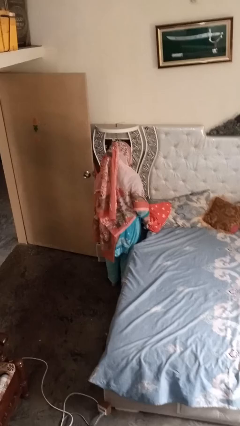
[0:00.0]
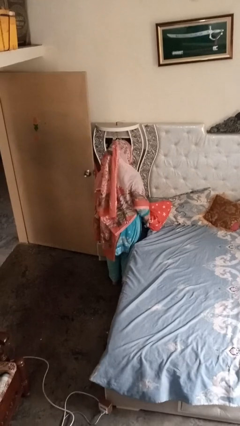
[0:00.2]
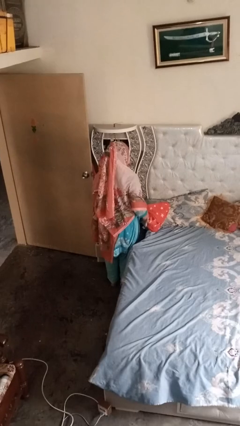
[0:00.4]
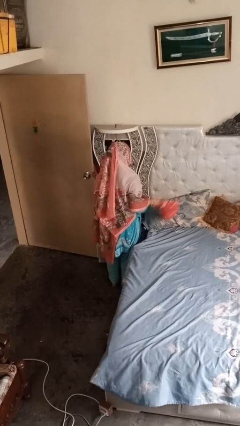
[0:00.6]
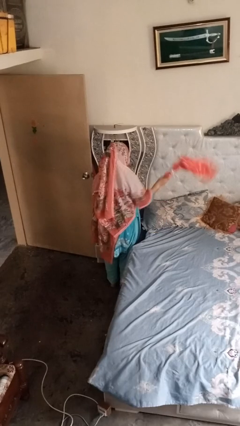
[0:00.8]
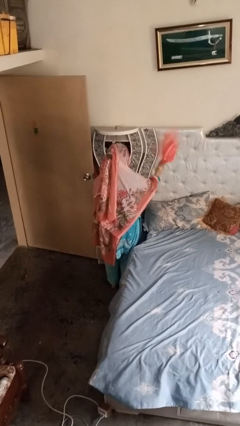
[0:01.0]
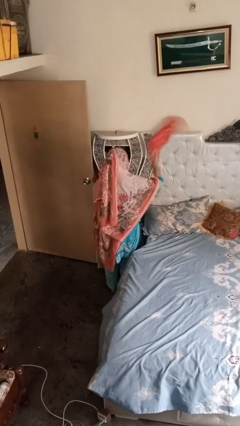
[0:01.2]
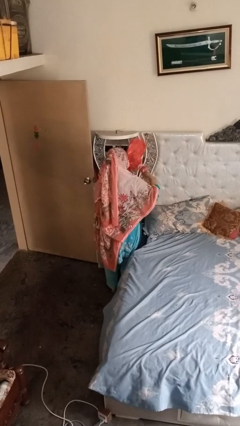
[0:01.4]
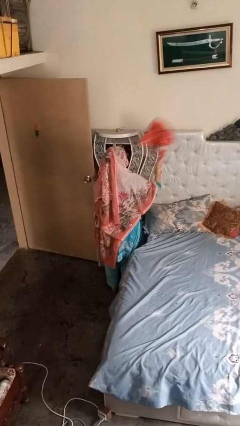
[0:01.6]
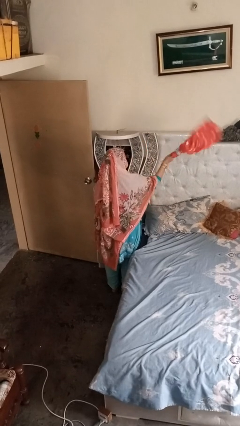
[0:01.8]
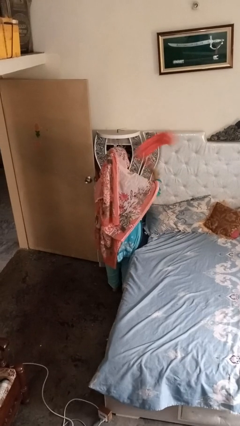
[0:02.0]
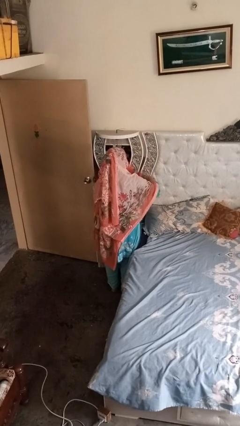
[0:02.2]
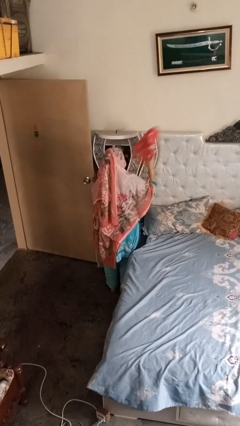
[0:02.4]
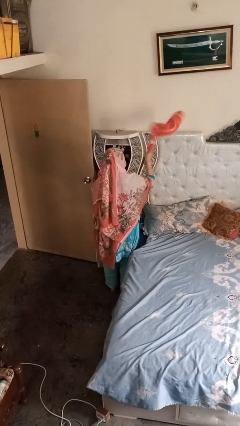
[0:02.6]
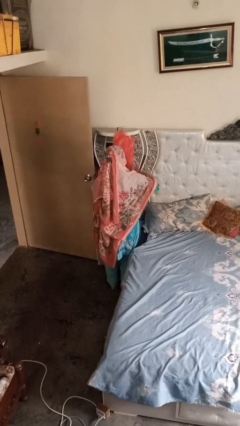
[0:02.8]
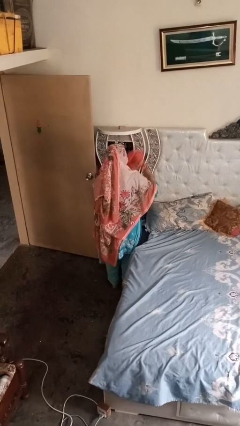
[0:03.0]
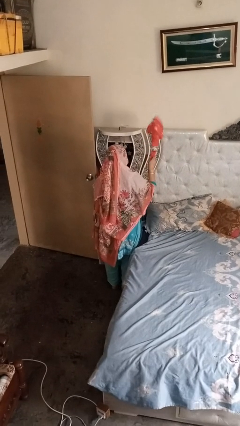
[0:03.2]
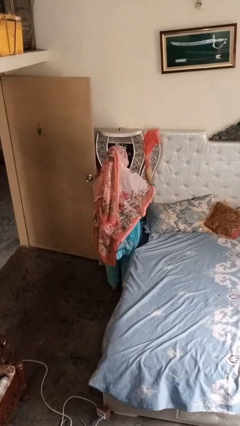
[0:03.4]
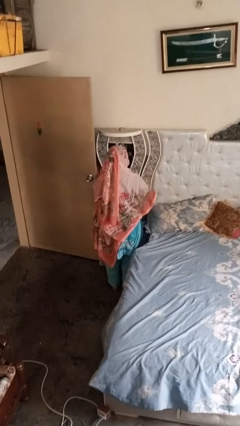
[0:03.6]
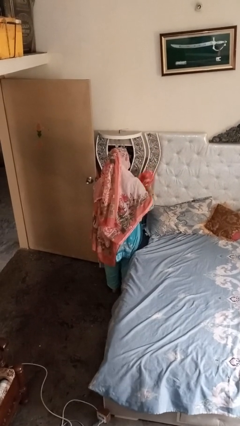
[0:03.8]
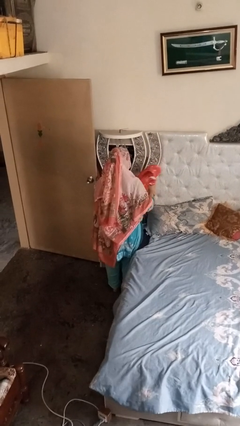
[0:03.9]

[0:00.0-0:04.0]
person dusts furniture

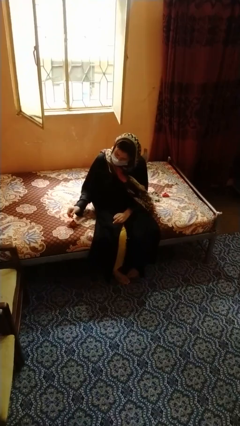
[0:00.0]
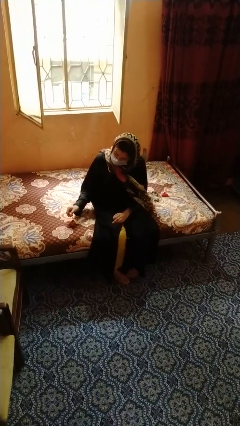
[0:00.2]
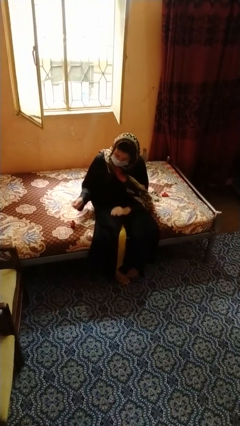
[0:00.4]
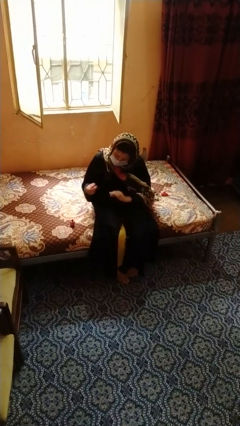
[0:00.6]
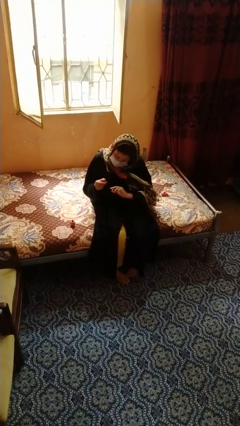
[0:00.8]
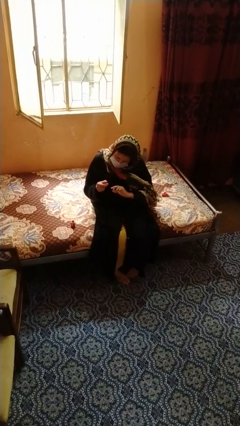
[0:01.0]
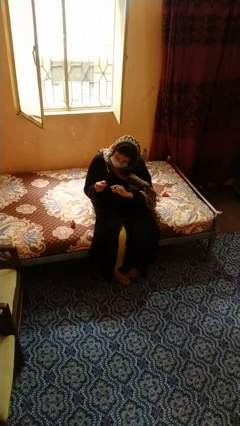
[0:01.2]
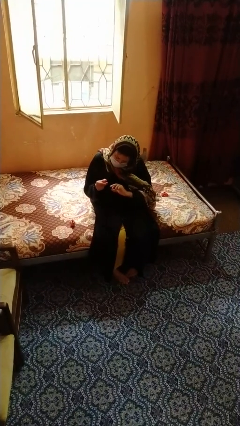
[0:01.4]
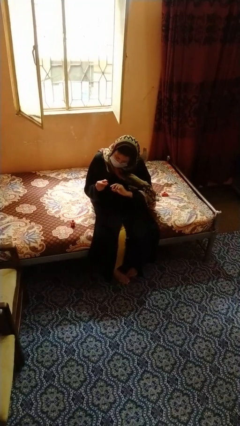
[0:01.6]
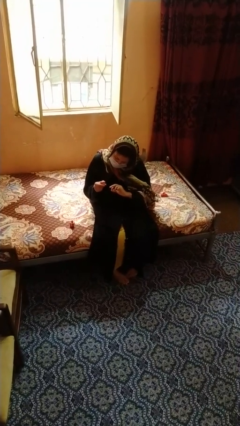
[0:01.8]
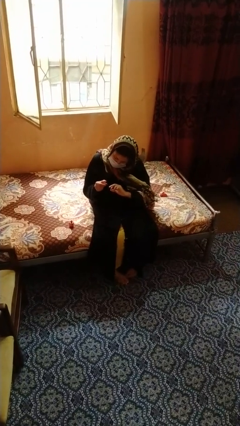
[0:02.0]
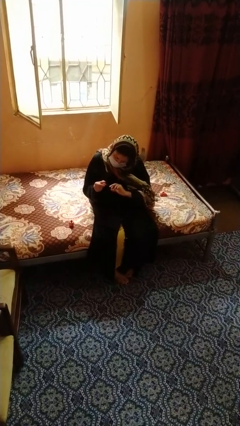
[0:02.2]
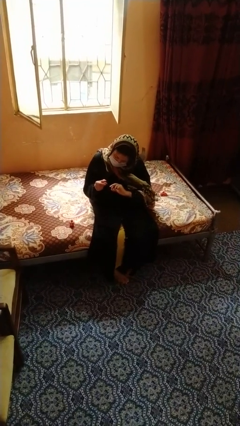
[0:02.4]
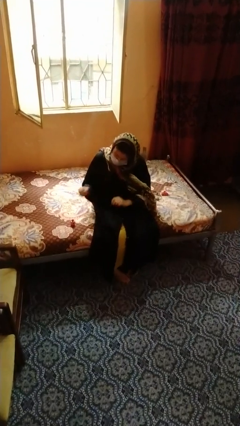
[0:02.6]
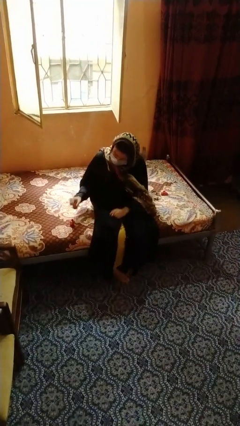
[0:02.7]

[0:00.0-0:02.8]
person paints fingernails

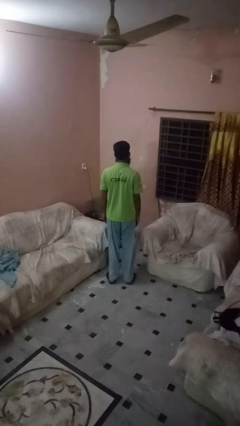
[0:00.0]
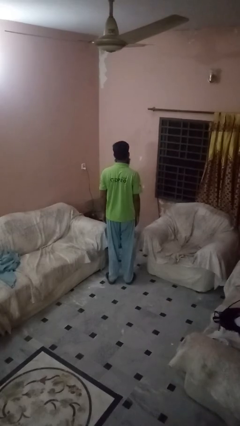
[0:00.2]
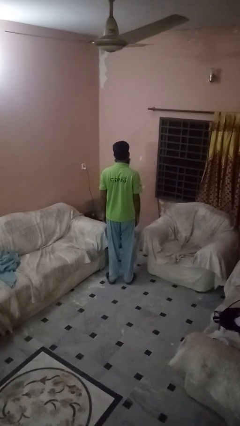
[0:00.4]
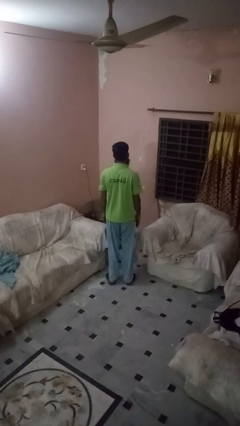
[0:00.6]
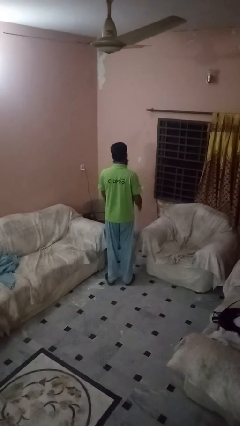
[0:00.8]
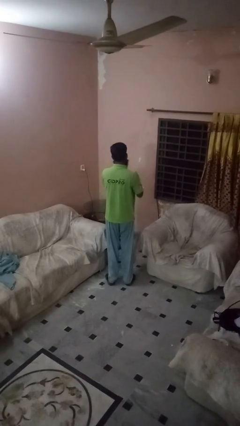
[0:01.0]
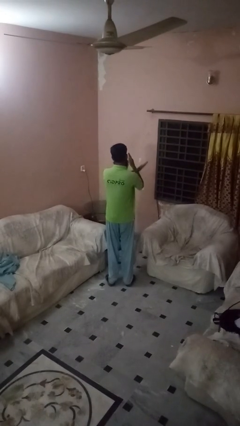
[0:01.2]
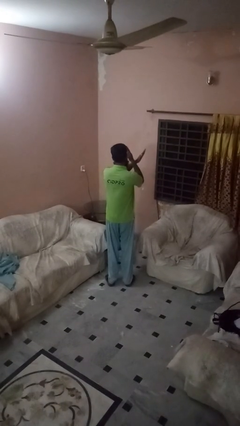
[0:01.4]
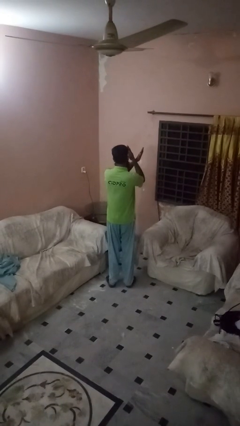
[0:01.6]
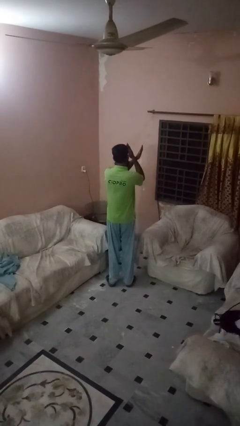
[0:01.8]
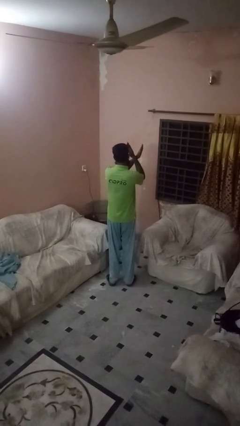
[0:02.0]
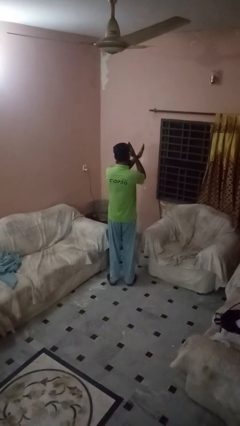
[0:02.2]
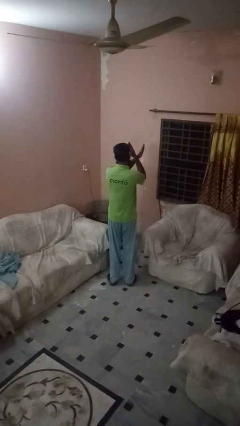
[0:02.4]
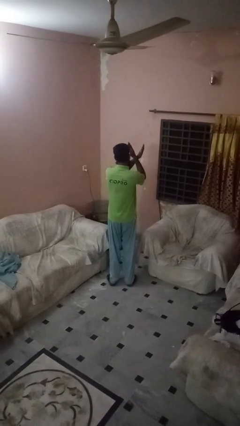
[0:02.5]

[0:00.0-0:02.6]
person gestures arms x

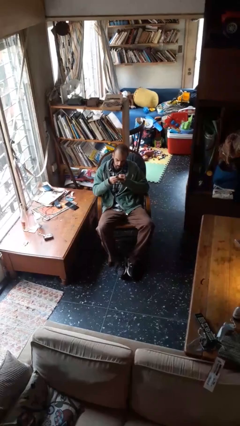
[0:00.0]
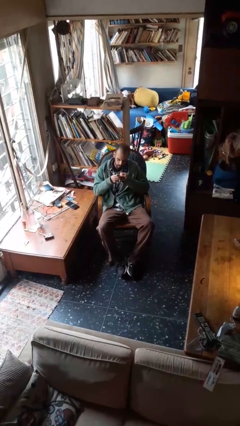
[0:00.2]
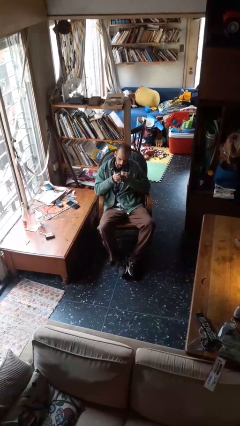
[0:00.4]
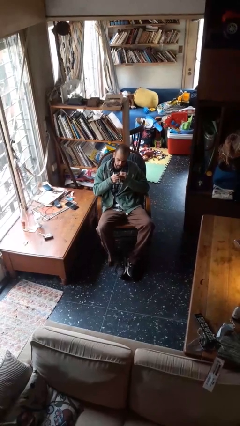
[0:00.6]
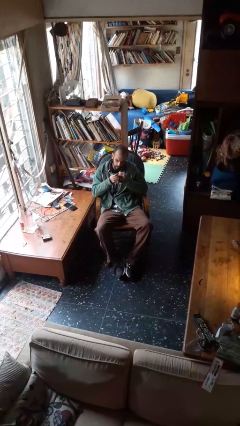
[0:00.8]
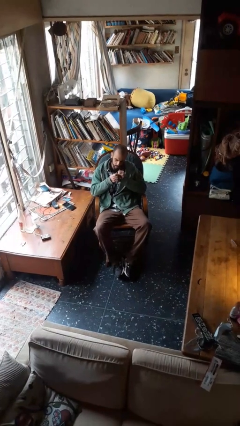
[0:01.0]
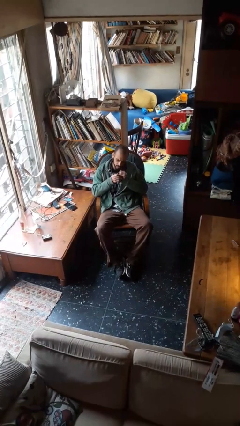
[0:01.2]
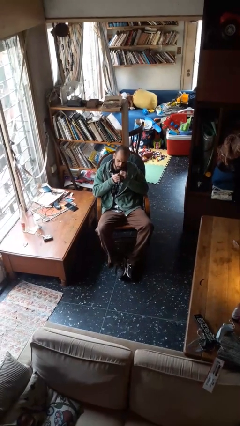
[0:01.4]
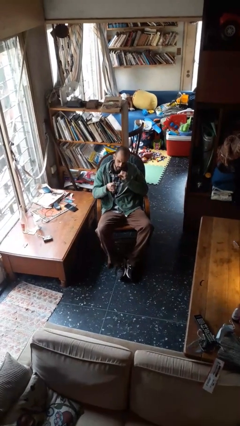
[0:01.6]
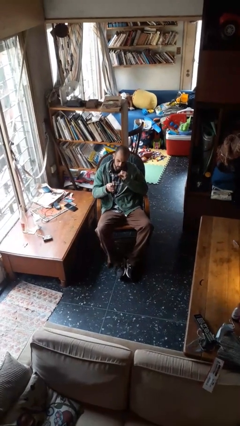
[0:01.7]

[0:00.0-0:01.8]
person files fingernails

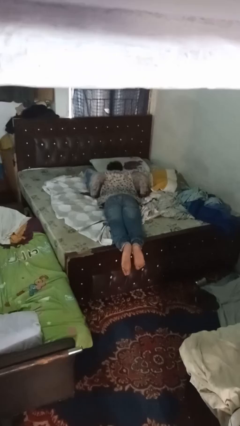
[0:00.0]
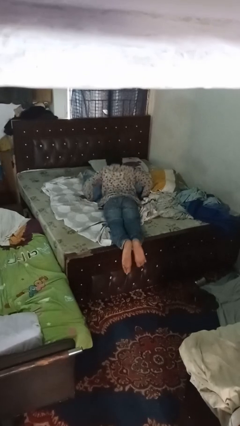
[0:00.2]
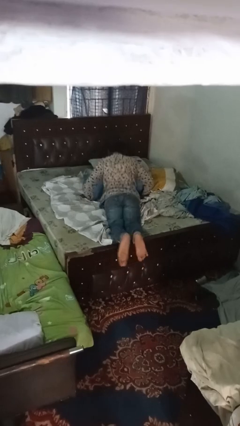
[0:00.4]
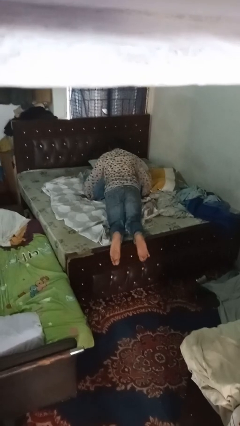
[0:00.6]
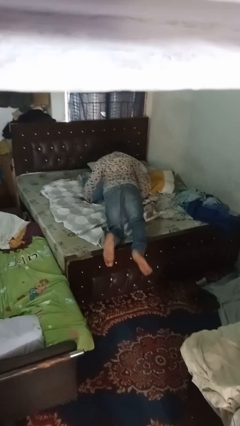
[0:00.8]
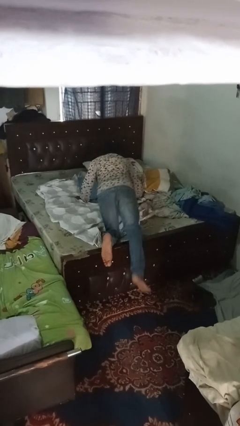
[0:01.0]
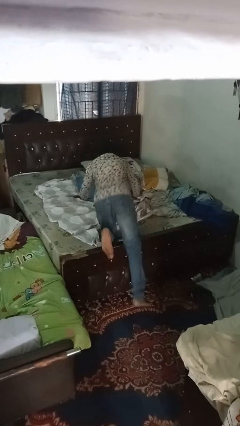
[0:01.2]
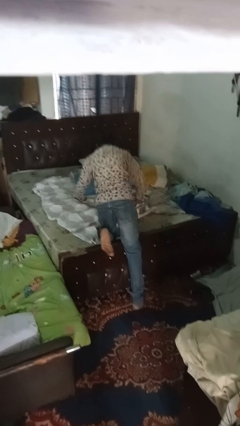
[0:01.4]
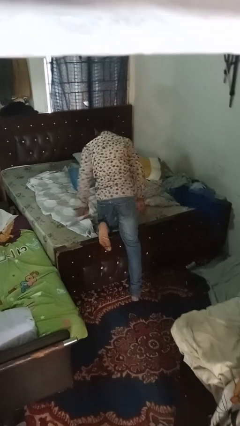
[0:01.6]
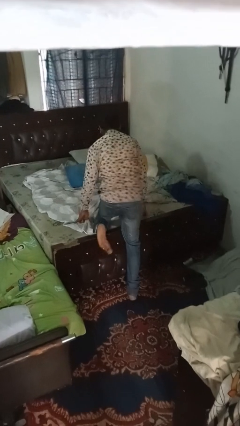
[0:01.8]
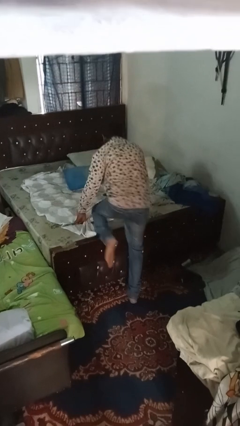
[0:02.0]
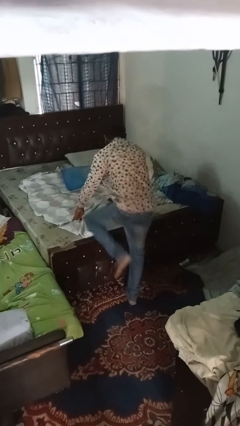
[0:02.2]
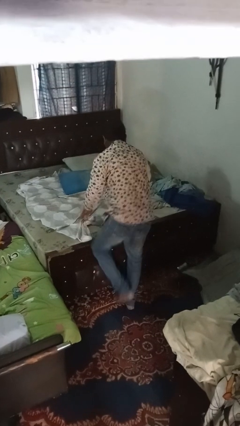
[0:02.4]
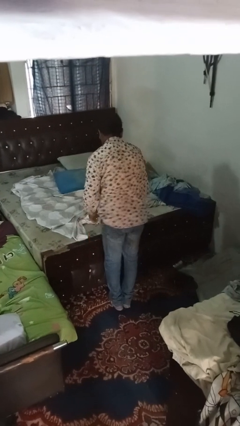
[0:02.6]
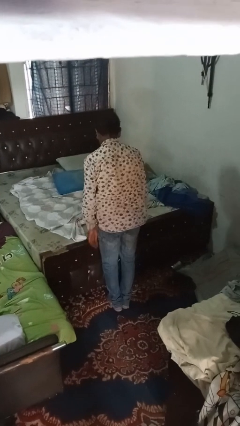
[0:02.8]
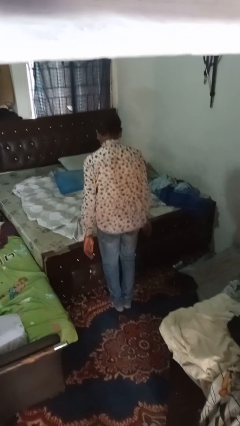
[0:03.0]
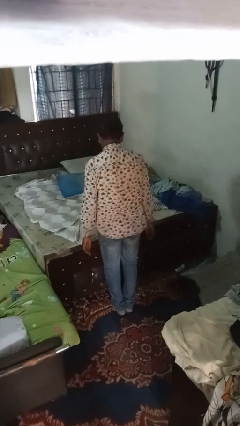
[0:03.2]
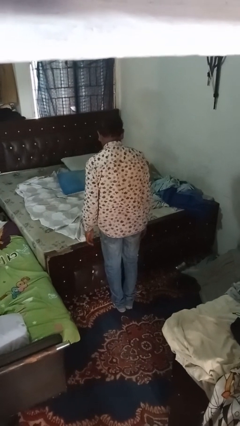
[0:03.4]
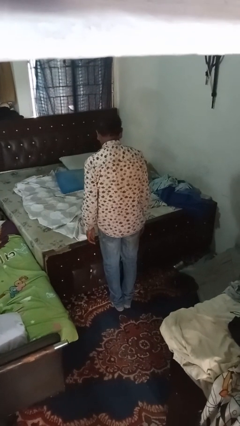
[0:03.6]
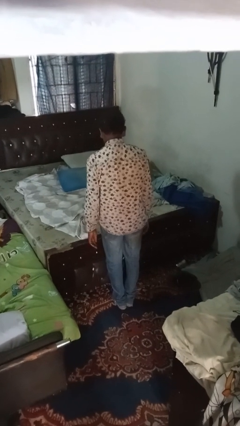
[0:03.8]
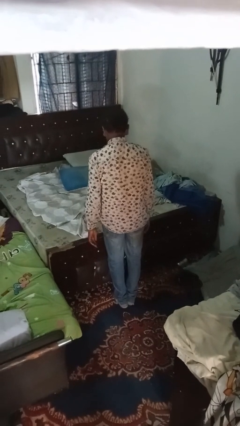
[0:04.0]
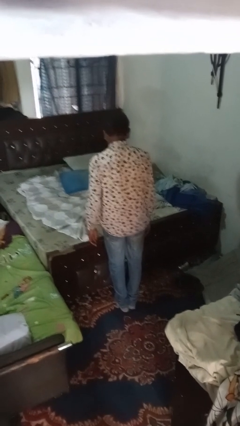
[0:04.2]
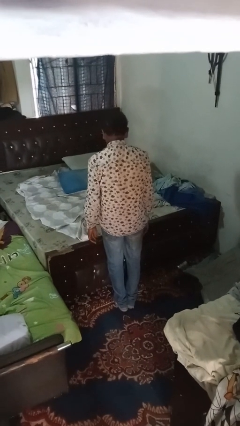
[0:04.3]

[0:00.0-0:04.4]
person stands up

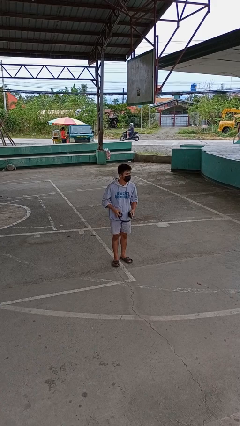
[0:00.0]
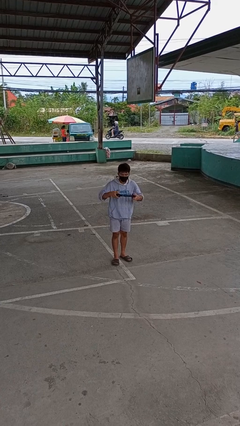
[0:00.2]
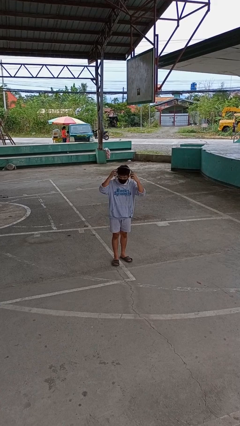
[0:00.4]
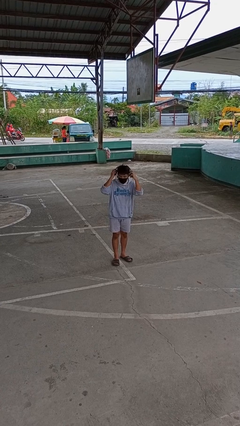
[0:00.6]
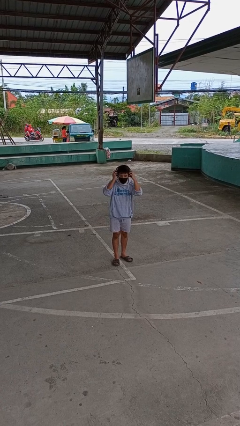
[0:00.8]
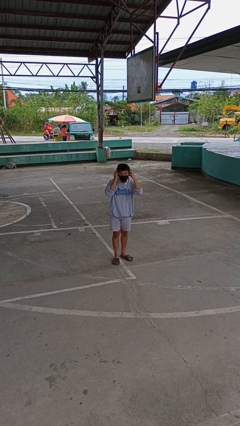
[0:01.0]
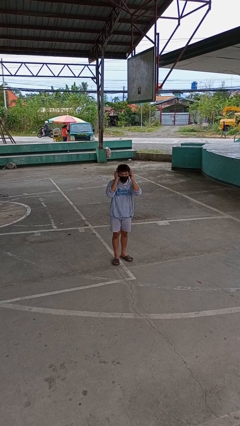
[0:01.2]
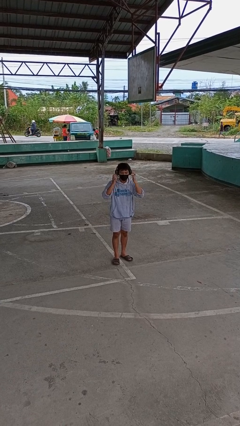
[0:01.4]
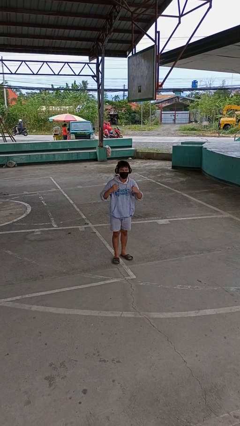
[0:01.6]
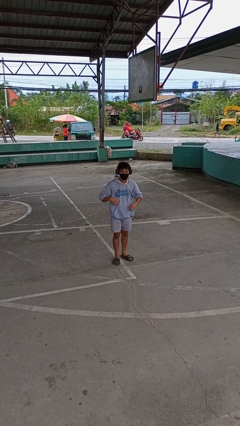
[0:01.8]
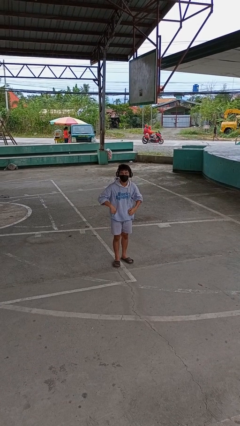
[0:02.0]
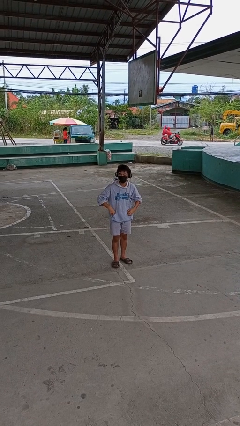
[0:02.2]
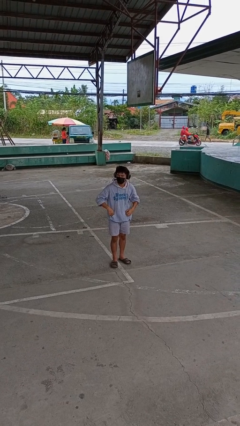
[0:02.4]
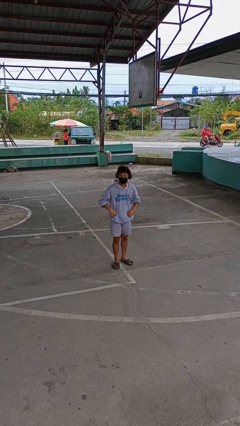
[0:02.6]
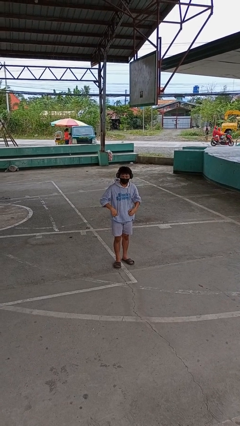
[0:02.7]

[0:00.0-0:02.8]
person puts on headphones
